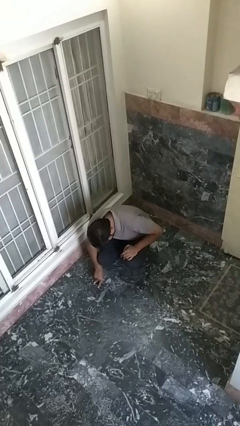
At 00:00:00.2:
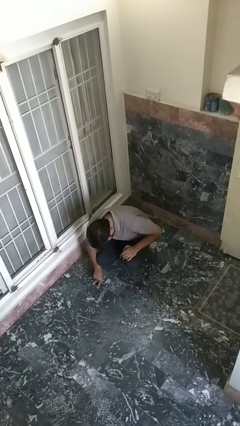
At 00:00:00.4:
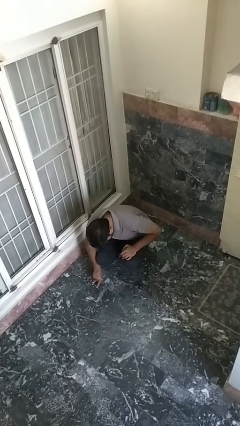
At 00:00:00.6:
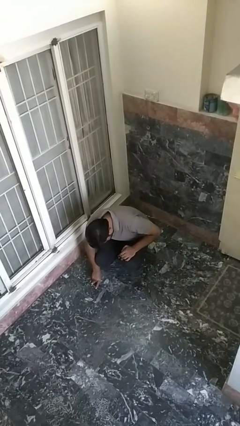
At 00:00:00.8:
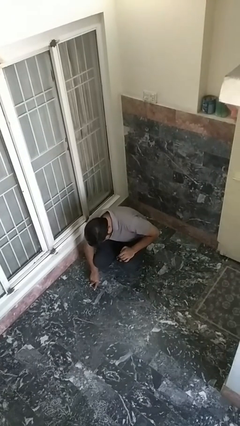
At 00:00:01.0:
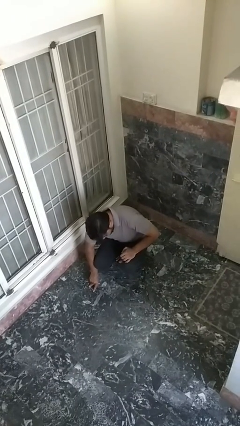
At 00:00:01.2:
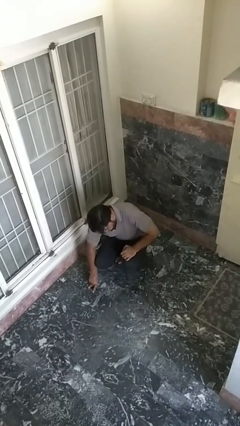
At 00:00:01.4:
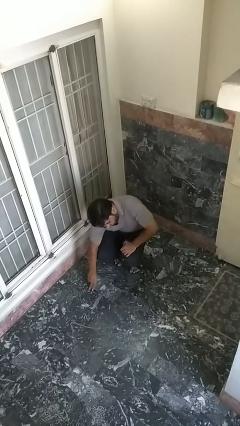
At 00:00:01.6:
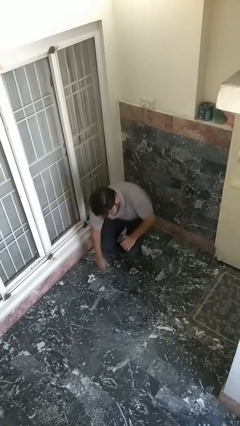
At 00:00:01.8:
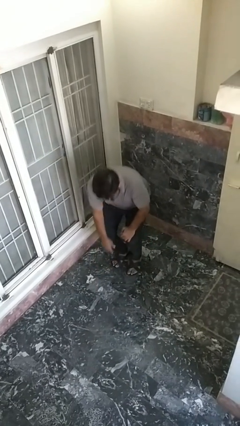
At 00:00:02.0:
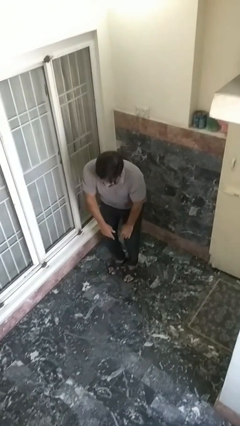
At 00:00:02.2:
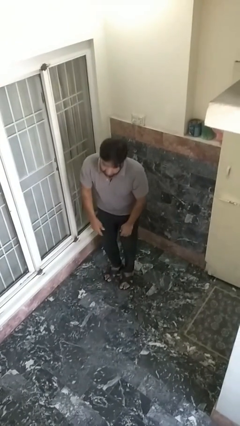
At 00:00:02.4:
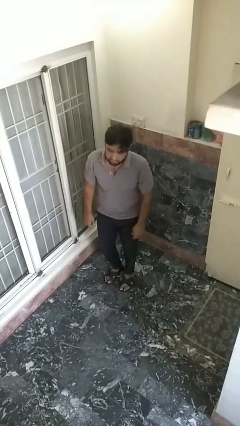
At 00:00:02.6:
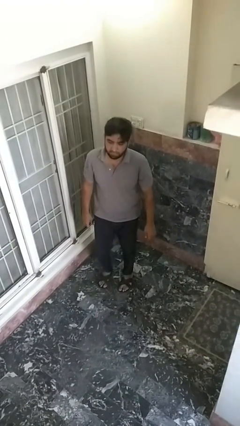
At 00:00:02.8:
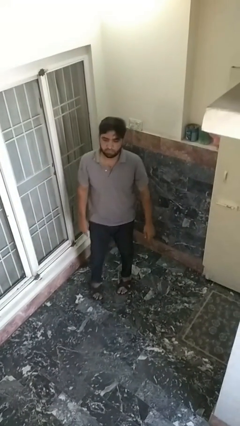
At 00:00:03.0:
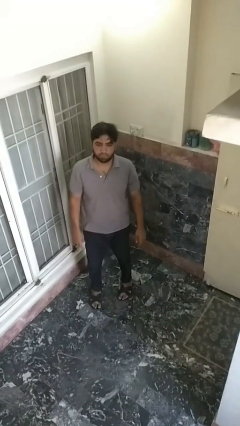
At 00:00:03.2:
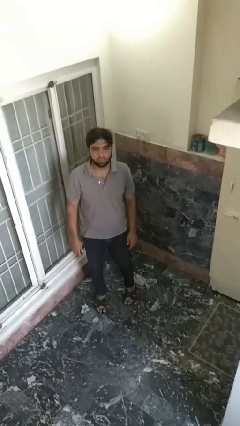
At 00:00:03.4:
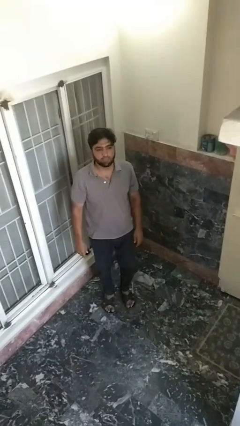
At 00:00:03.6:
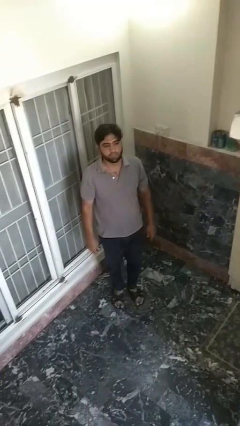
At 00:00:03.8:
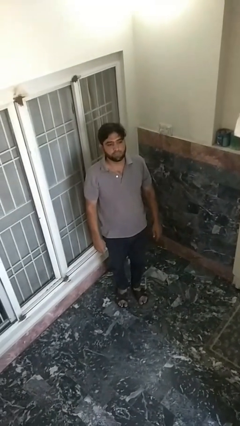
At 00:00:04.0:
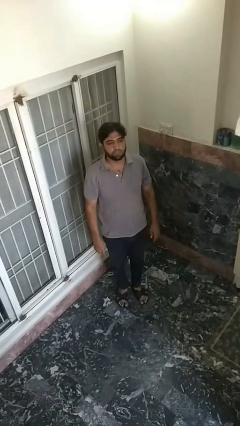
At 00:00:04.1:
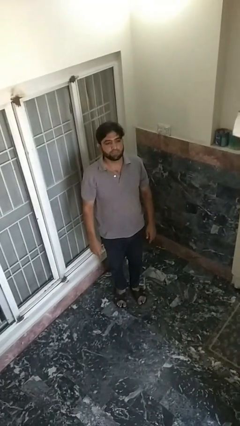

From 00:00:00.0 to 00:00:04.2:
person stands up from floor

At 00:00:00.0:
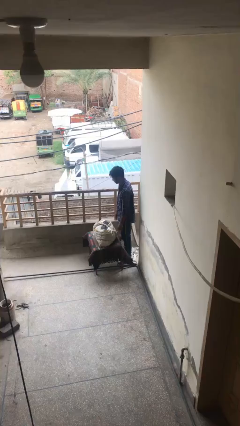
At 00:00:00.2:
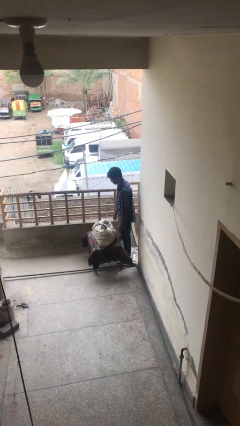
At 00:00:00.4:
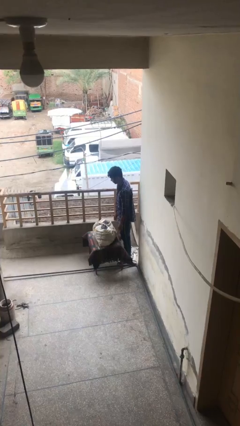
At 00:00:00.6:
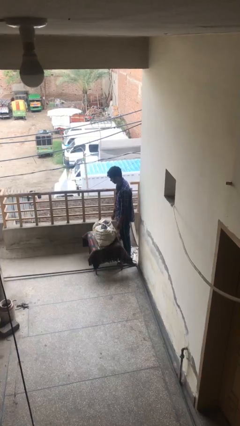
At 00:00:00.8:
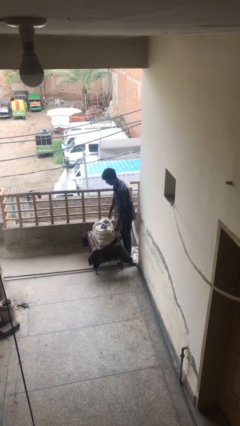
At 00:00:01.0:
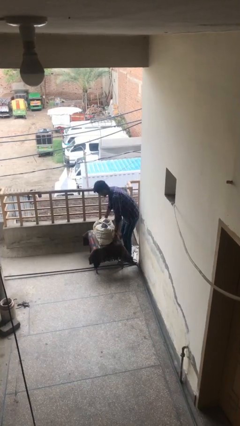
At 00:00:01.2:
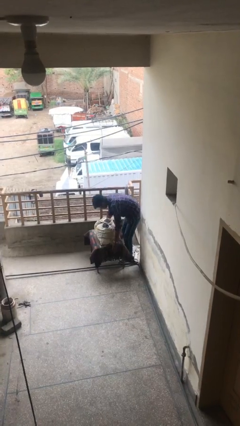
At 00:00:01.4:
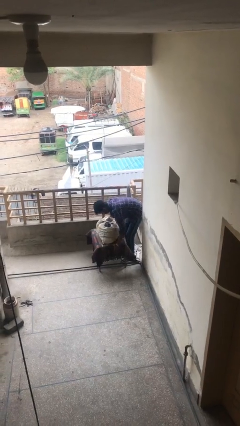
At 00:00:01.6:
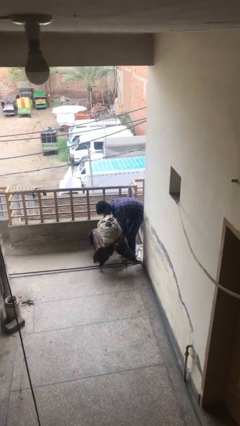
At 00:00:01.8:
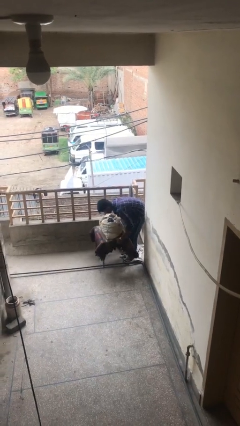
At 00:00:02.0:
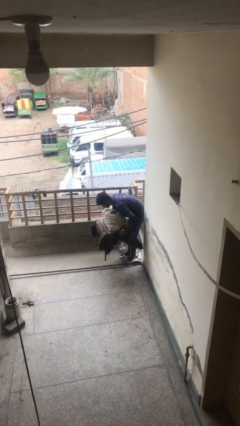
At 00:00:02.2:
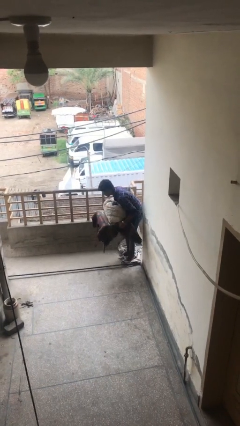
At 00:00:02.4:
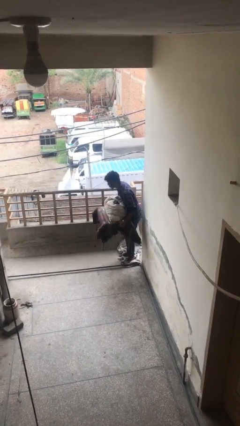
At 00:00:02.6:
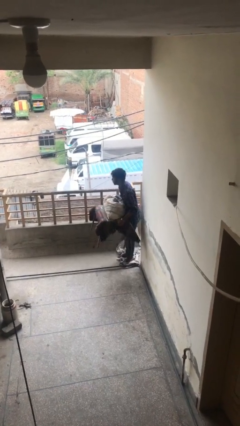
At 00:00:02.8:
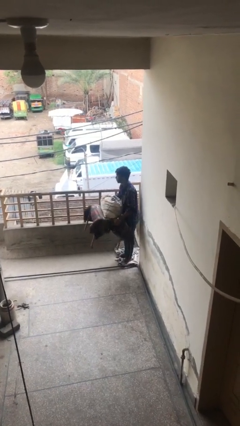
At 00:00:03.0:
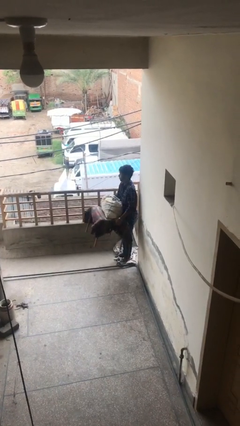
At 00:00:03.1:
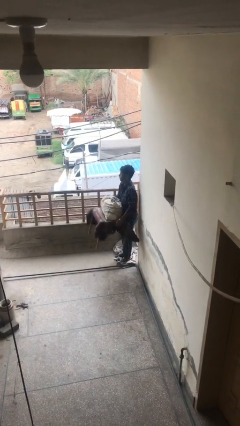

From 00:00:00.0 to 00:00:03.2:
person picks up object from floor

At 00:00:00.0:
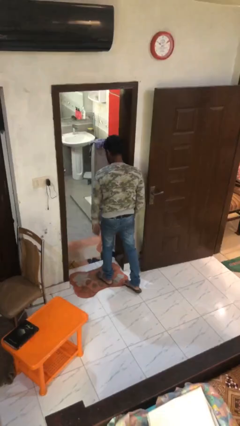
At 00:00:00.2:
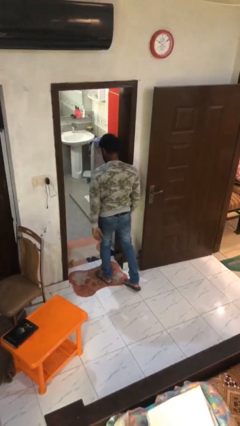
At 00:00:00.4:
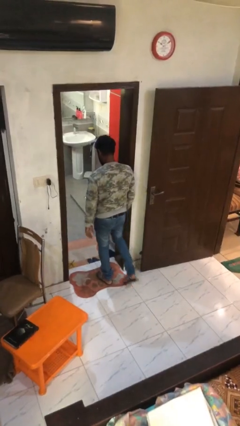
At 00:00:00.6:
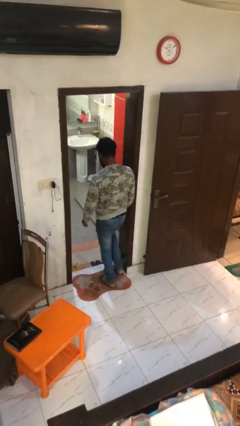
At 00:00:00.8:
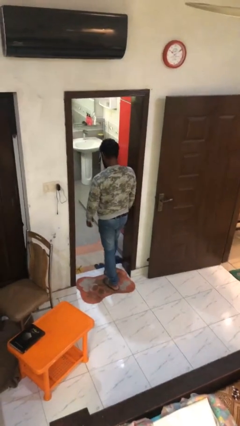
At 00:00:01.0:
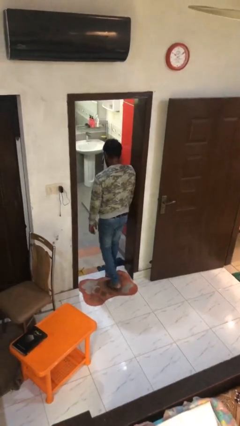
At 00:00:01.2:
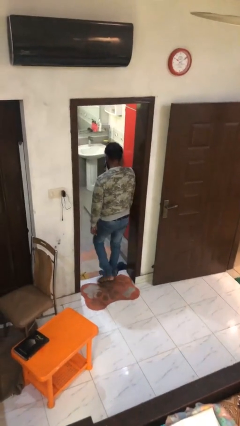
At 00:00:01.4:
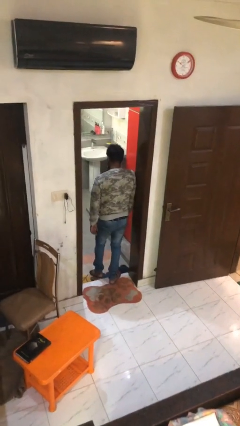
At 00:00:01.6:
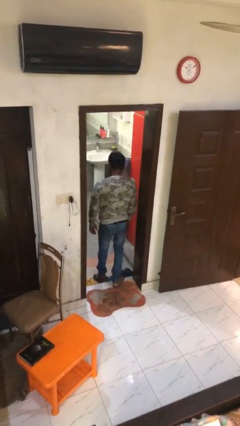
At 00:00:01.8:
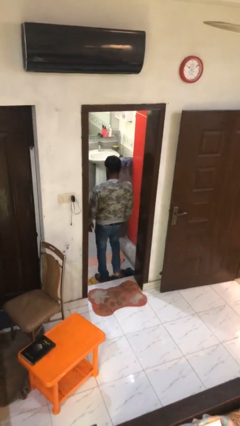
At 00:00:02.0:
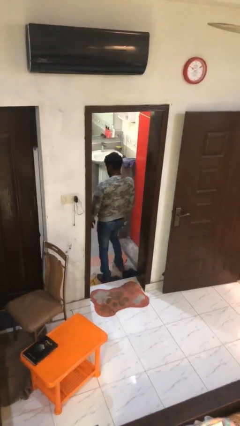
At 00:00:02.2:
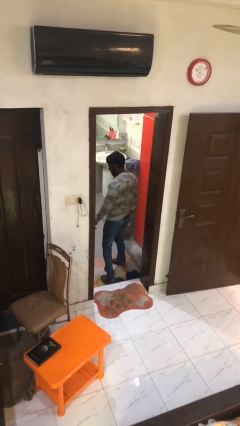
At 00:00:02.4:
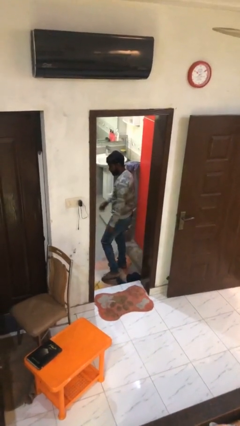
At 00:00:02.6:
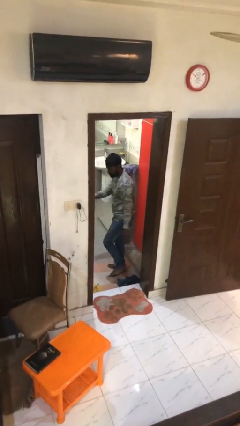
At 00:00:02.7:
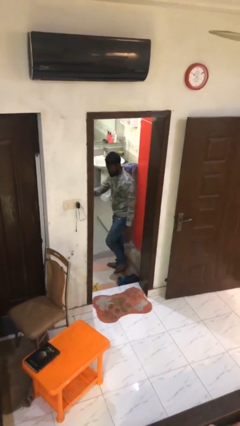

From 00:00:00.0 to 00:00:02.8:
person exits scene through structure

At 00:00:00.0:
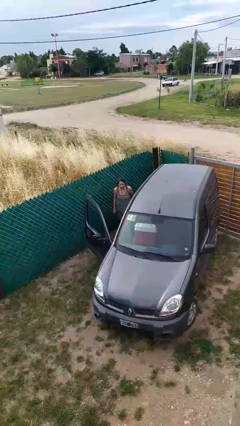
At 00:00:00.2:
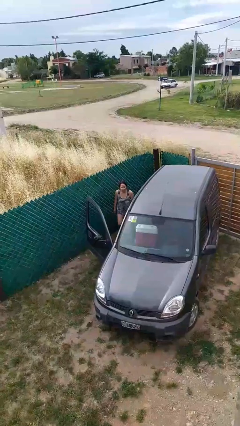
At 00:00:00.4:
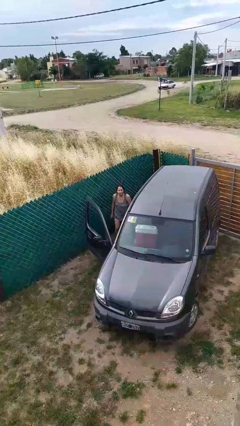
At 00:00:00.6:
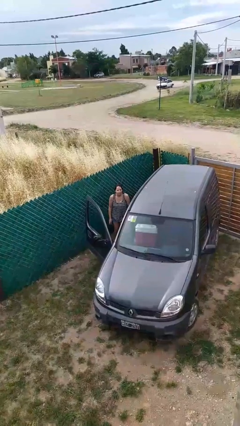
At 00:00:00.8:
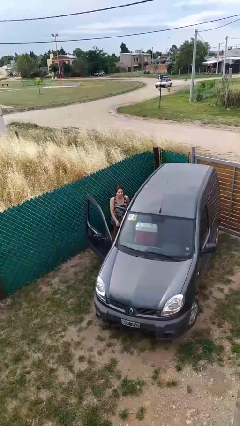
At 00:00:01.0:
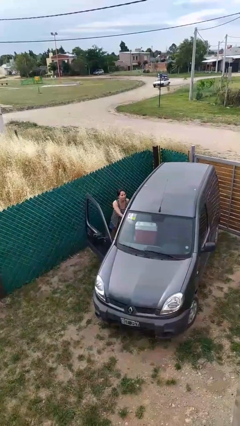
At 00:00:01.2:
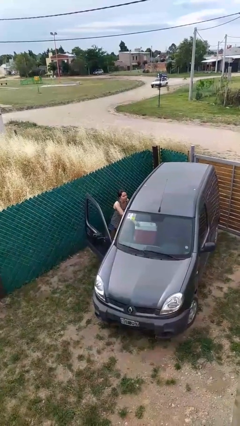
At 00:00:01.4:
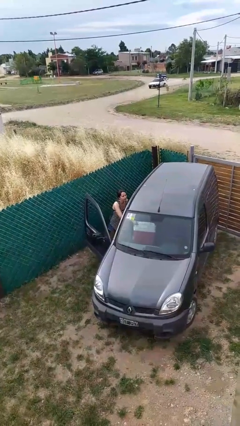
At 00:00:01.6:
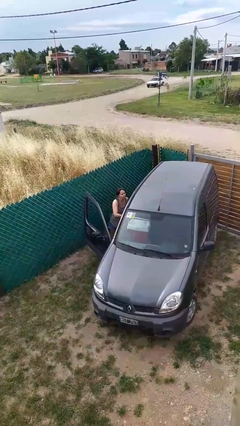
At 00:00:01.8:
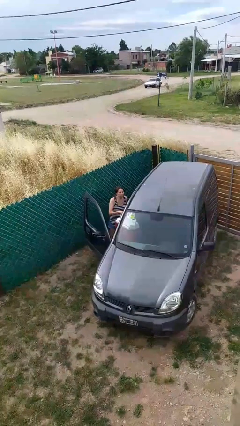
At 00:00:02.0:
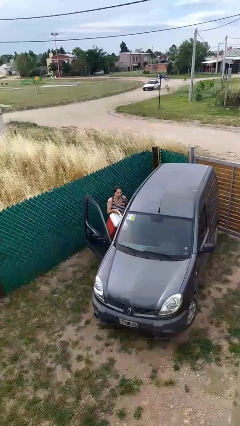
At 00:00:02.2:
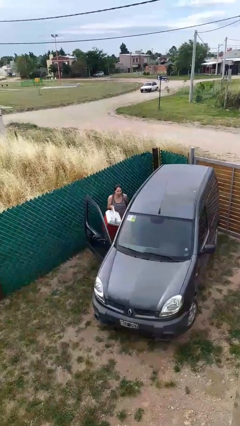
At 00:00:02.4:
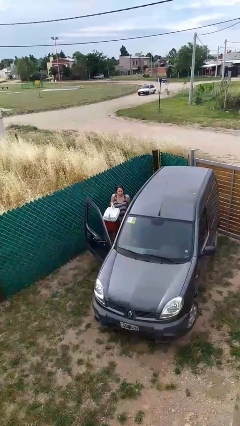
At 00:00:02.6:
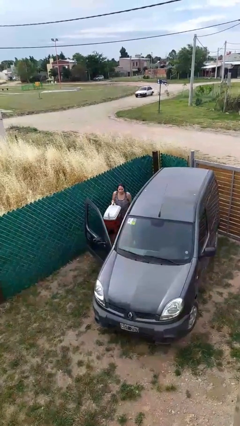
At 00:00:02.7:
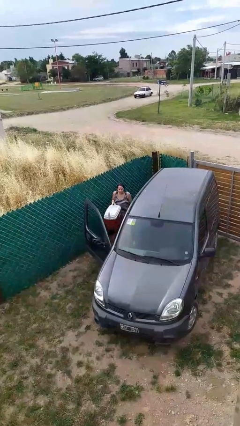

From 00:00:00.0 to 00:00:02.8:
person unloads car

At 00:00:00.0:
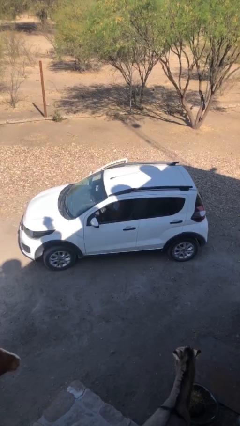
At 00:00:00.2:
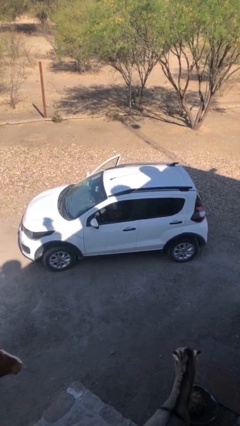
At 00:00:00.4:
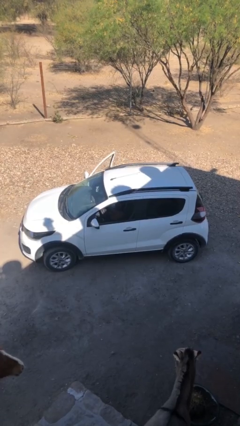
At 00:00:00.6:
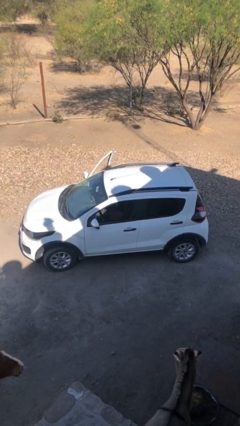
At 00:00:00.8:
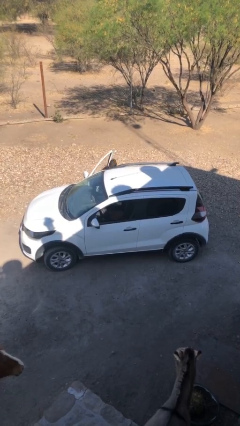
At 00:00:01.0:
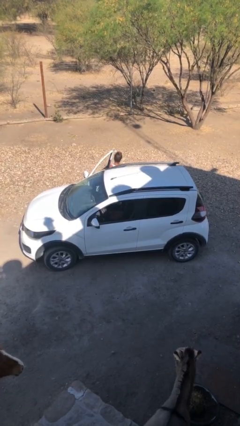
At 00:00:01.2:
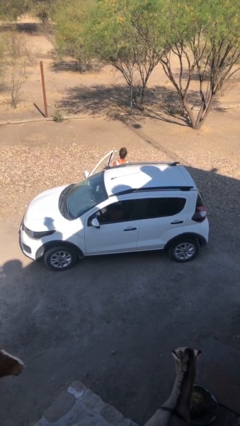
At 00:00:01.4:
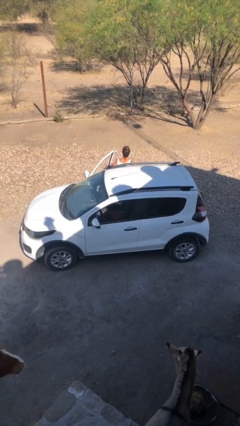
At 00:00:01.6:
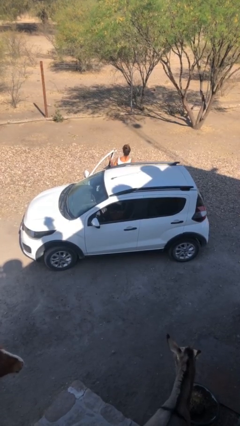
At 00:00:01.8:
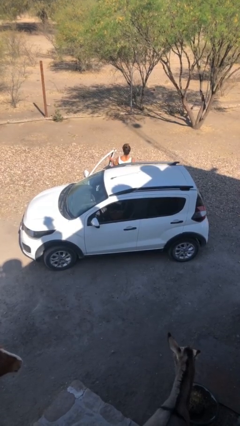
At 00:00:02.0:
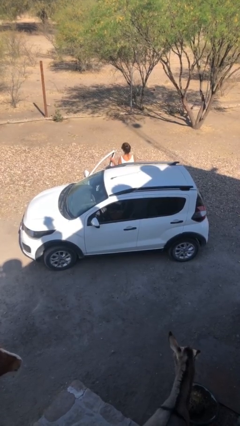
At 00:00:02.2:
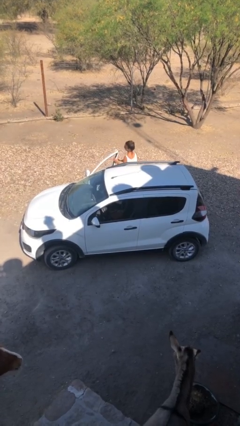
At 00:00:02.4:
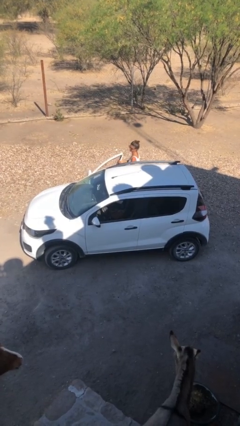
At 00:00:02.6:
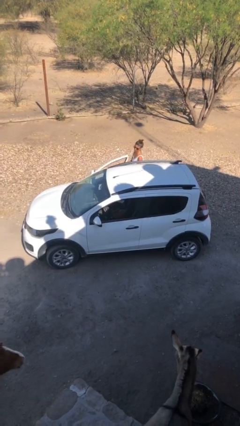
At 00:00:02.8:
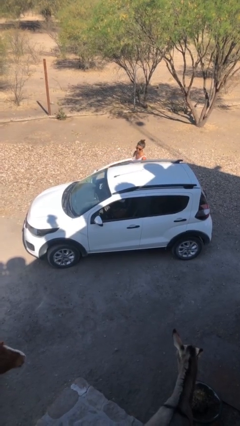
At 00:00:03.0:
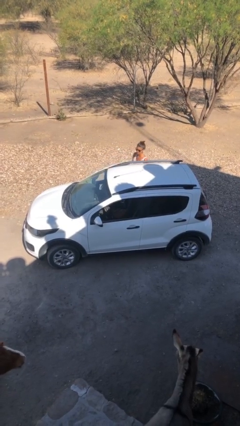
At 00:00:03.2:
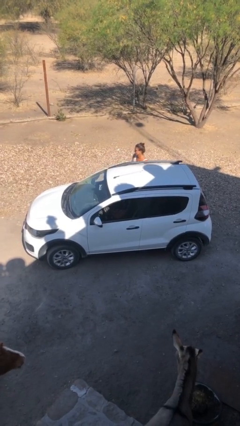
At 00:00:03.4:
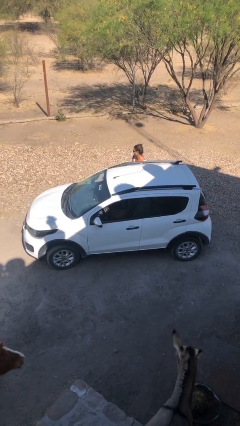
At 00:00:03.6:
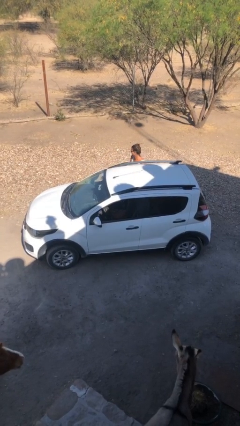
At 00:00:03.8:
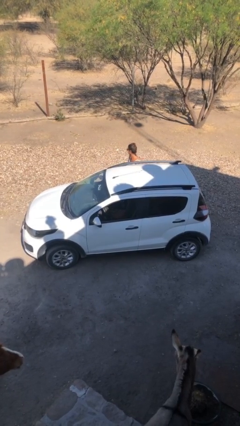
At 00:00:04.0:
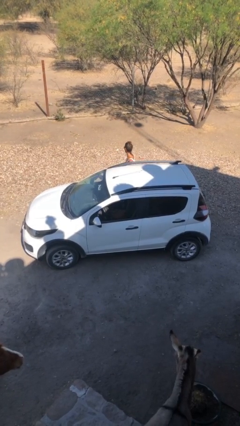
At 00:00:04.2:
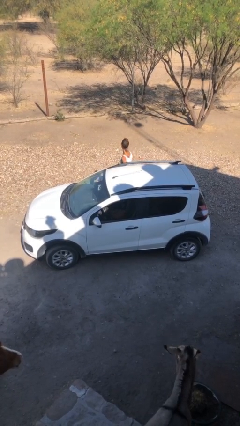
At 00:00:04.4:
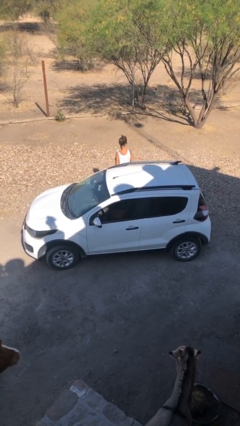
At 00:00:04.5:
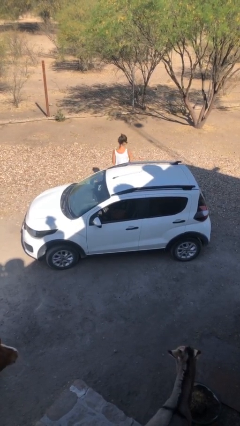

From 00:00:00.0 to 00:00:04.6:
car drops off person
